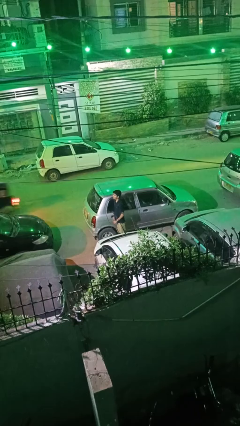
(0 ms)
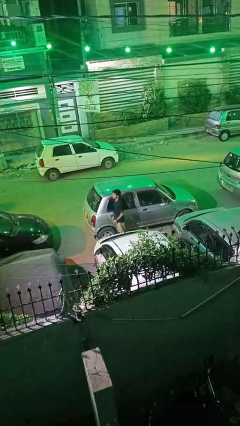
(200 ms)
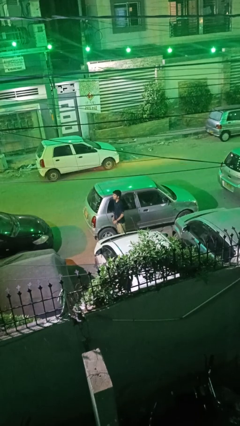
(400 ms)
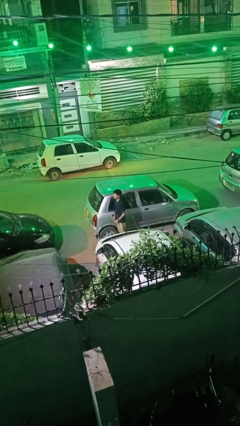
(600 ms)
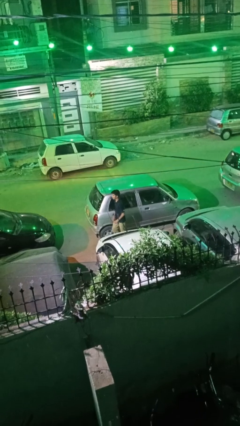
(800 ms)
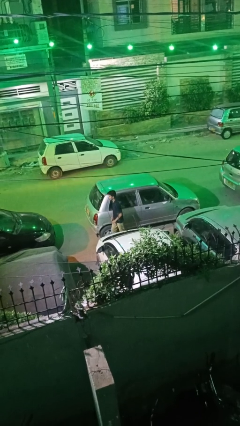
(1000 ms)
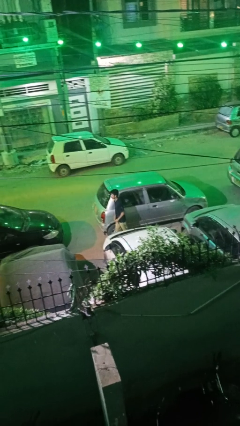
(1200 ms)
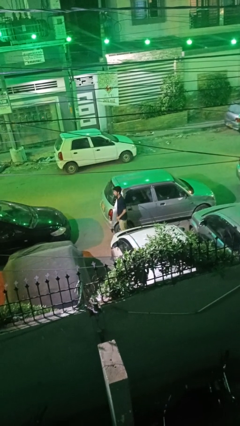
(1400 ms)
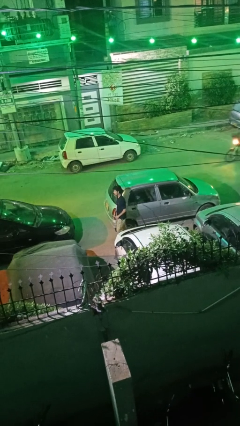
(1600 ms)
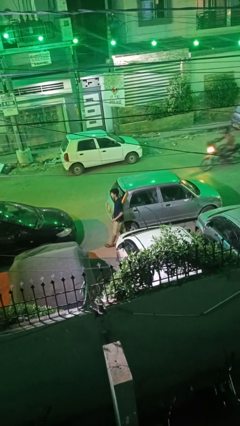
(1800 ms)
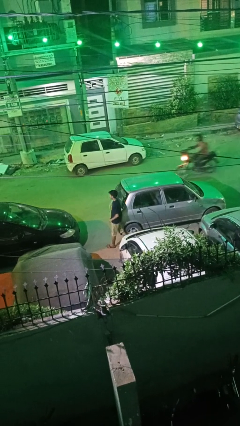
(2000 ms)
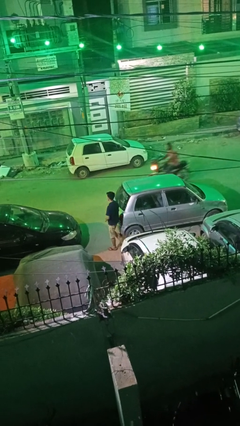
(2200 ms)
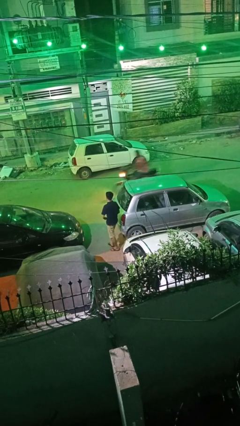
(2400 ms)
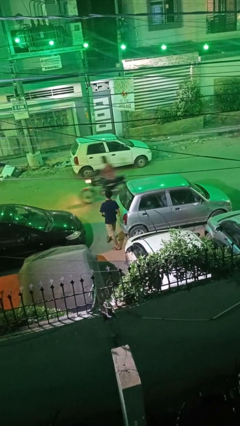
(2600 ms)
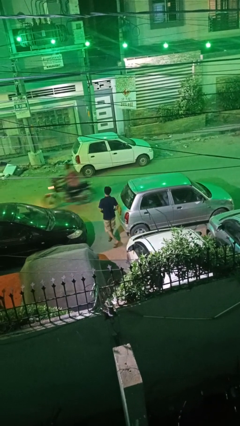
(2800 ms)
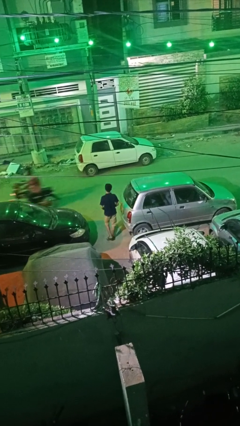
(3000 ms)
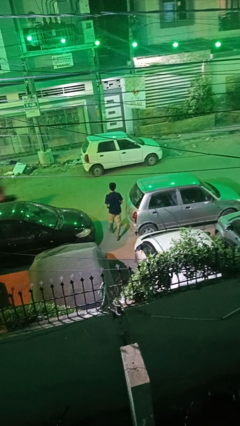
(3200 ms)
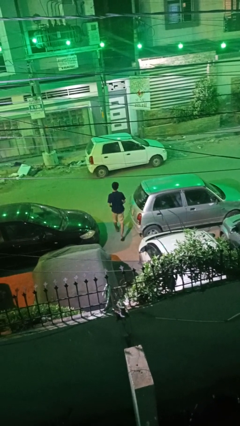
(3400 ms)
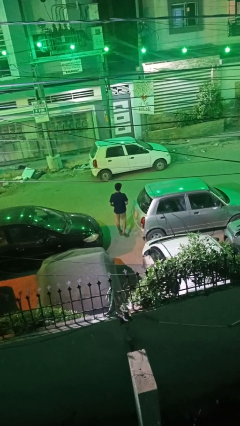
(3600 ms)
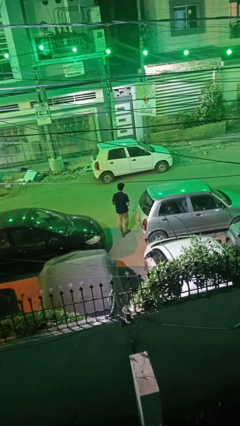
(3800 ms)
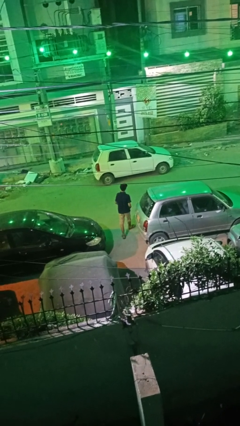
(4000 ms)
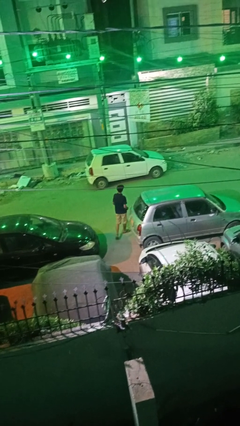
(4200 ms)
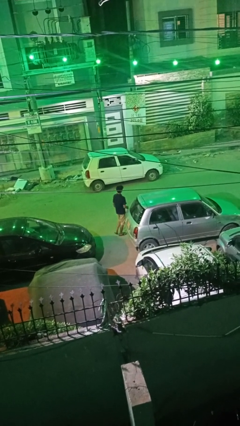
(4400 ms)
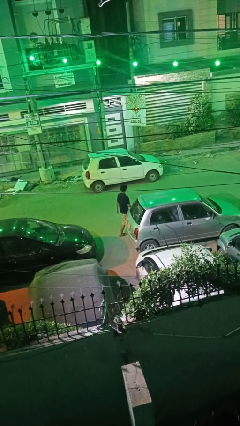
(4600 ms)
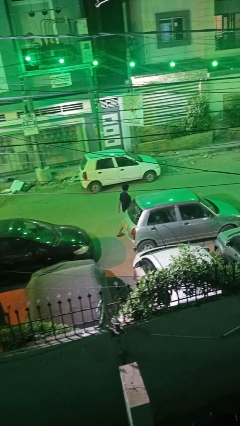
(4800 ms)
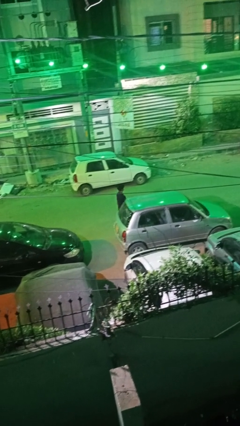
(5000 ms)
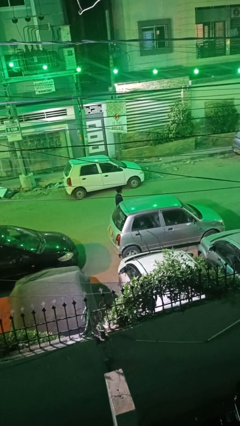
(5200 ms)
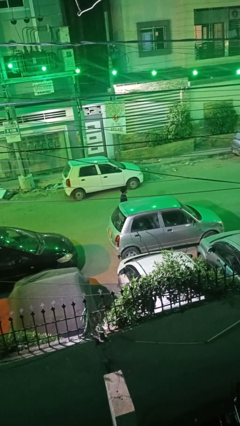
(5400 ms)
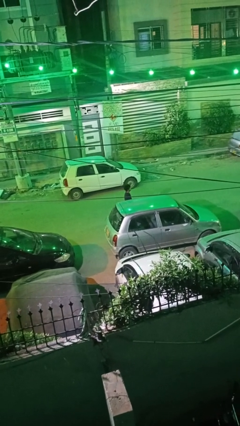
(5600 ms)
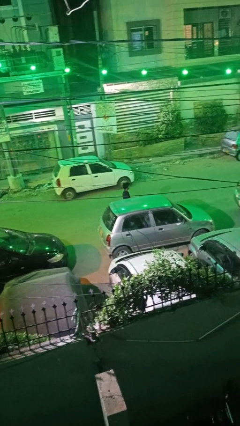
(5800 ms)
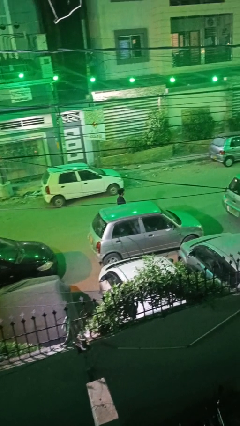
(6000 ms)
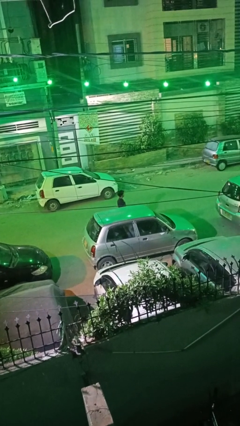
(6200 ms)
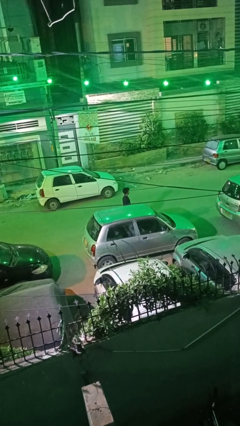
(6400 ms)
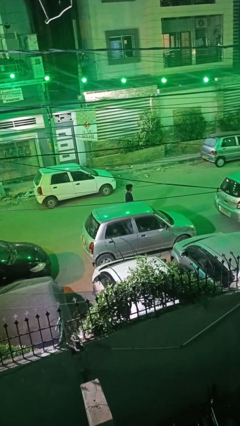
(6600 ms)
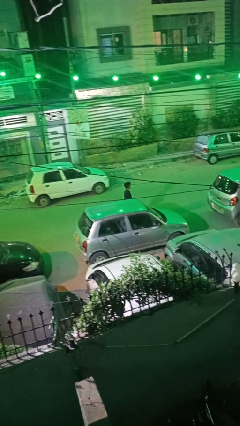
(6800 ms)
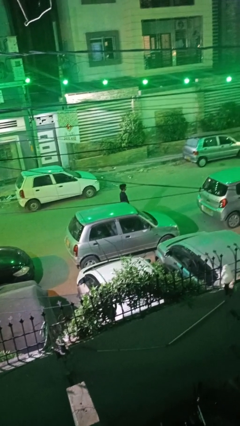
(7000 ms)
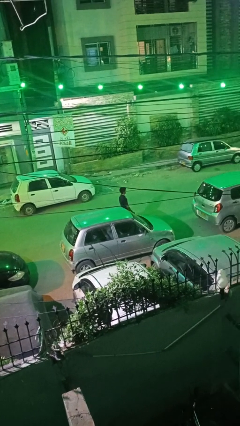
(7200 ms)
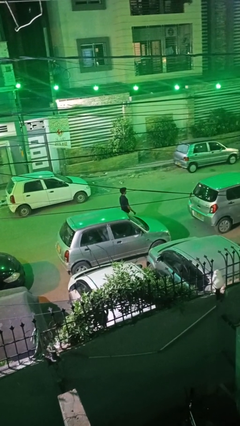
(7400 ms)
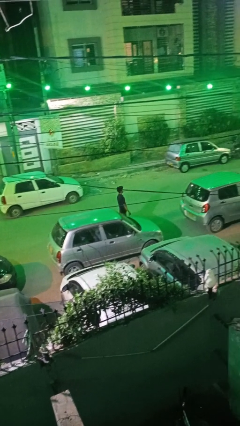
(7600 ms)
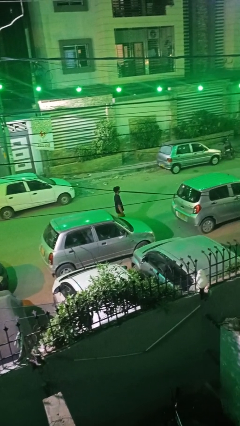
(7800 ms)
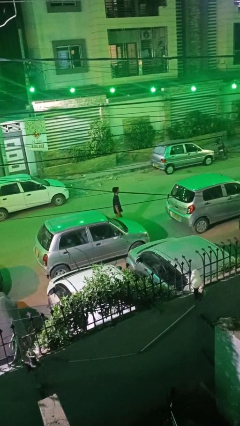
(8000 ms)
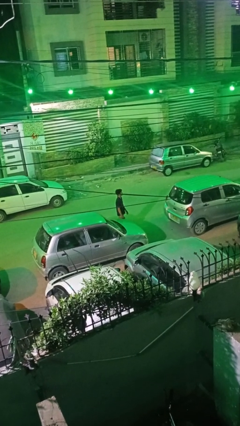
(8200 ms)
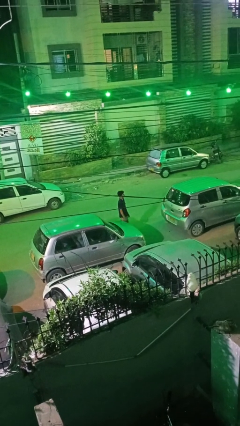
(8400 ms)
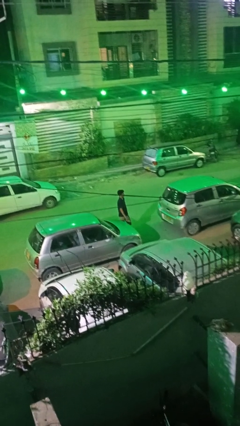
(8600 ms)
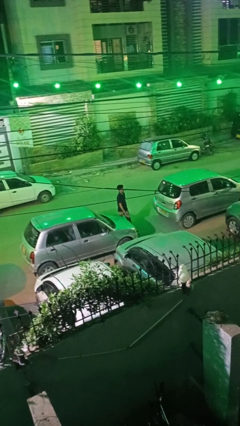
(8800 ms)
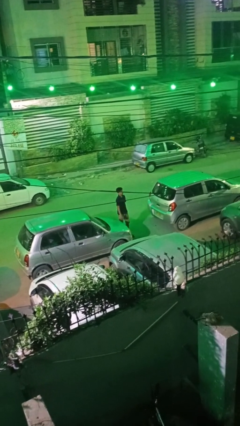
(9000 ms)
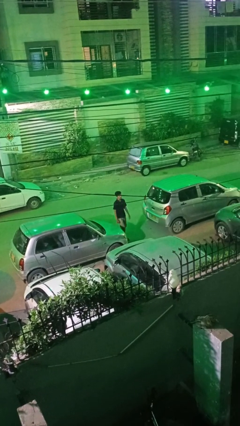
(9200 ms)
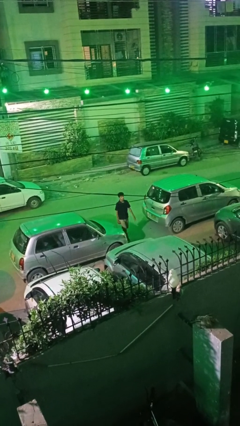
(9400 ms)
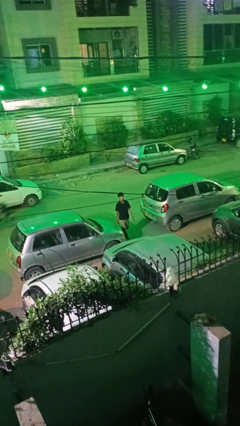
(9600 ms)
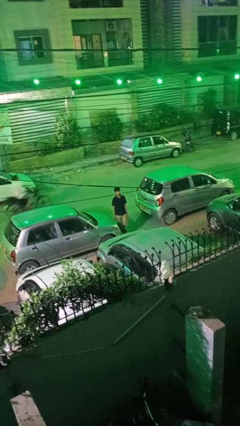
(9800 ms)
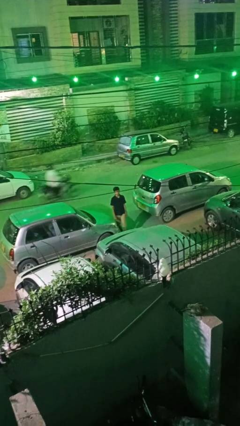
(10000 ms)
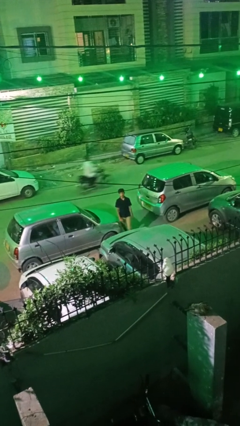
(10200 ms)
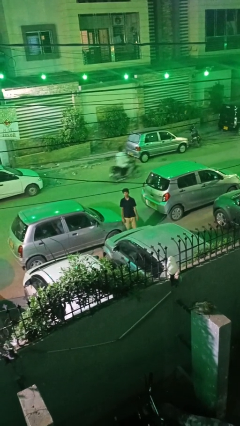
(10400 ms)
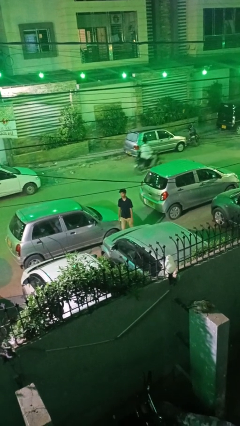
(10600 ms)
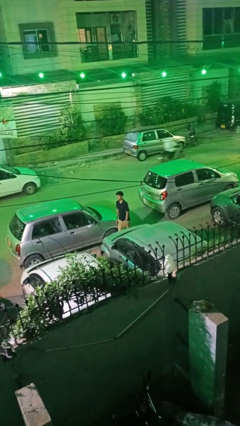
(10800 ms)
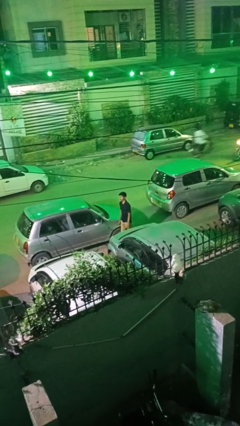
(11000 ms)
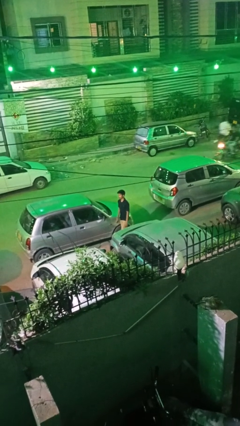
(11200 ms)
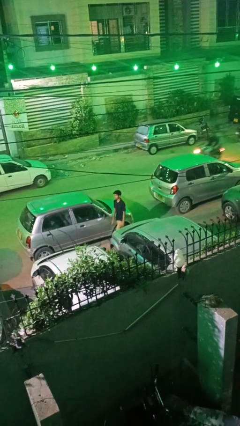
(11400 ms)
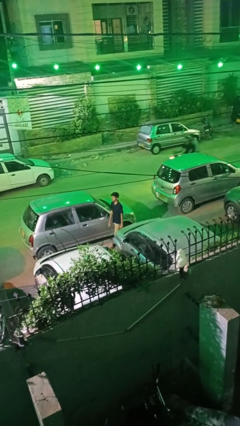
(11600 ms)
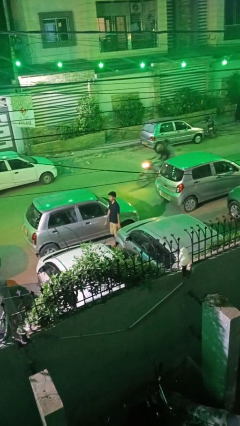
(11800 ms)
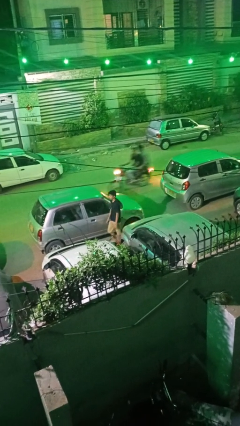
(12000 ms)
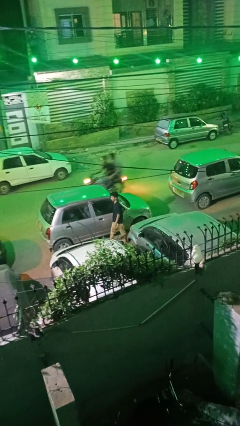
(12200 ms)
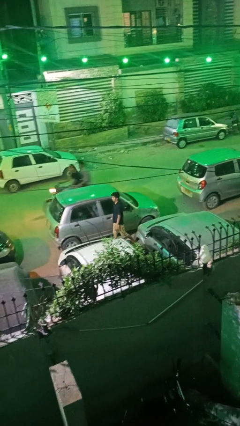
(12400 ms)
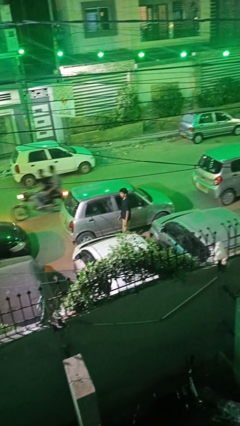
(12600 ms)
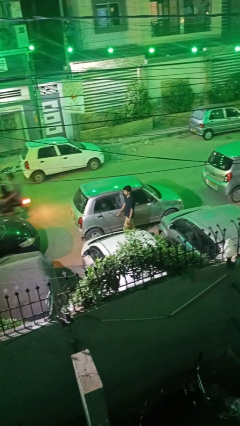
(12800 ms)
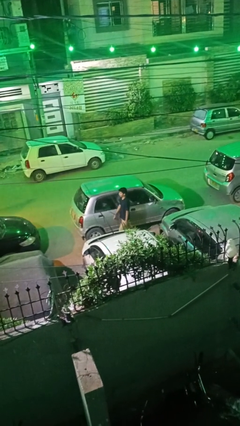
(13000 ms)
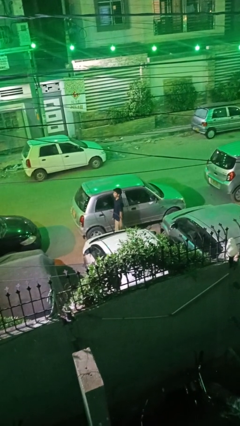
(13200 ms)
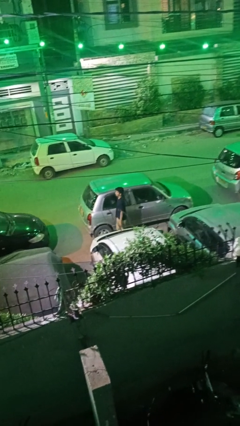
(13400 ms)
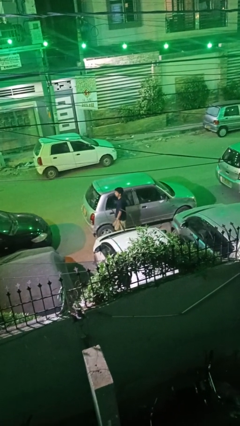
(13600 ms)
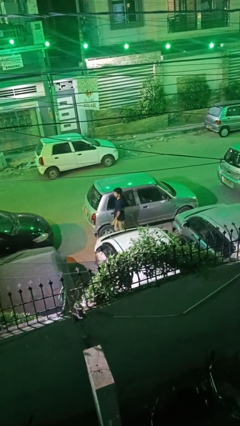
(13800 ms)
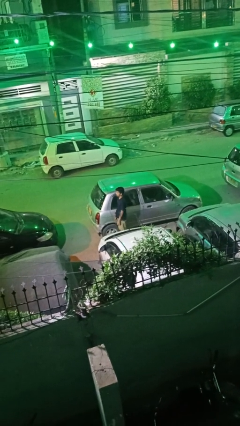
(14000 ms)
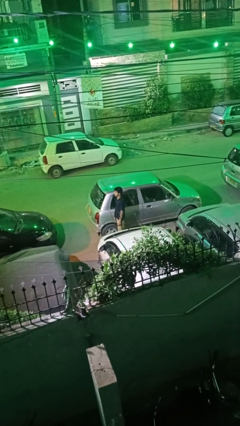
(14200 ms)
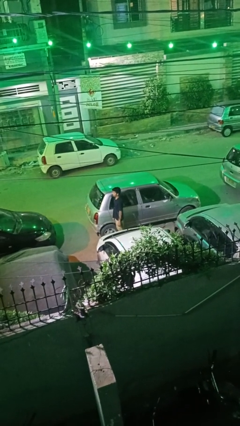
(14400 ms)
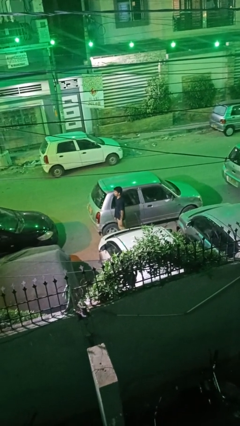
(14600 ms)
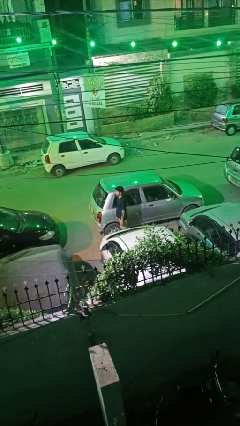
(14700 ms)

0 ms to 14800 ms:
person walks around car

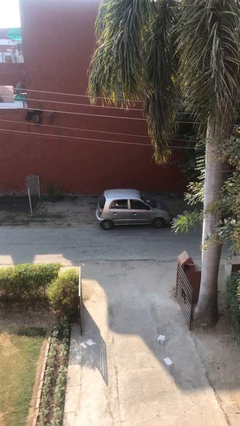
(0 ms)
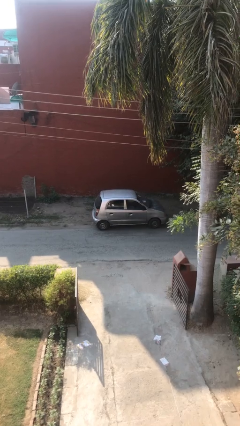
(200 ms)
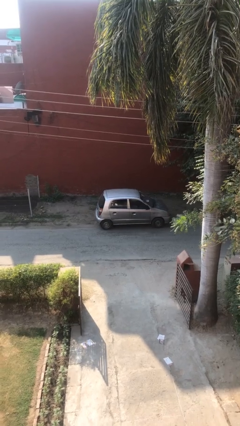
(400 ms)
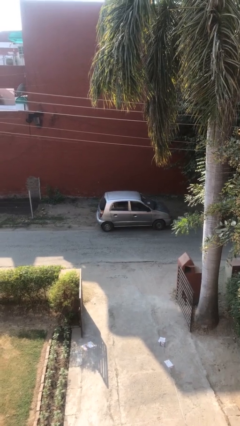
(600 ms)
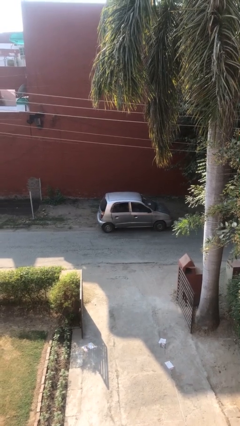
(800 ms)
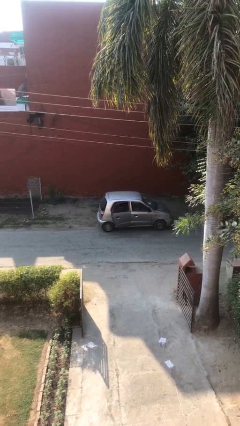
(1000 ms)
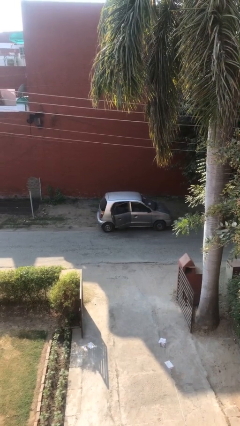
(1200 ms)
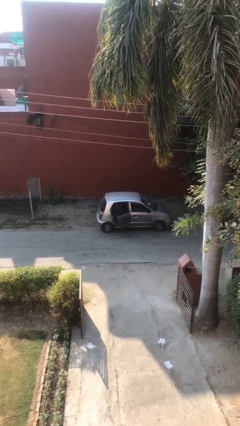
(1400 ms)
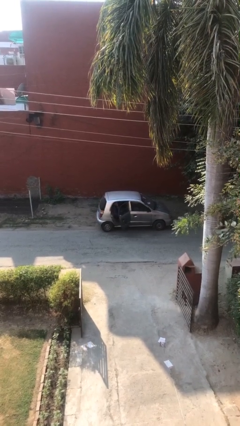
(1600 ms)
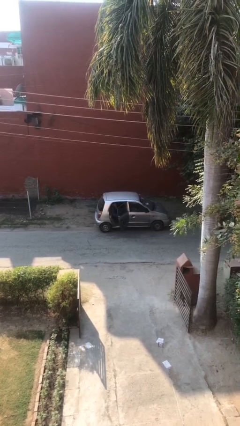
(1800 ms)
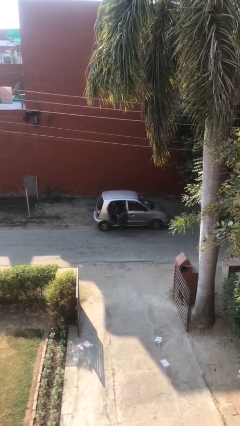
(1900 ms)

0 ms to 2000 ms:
person opens car door

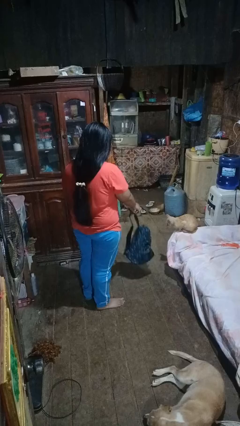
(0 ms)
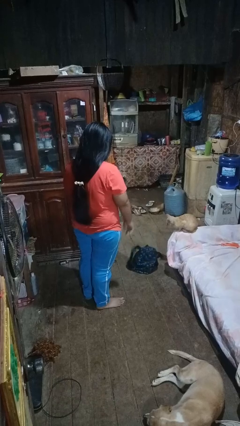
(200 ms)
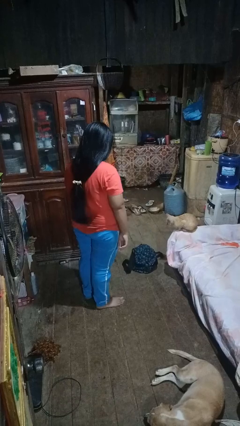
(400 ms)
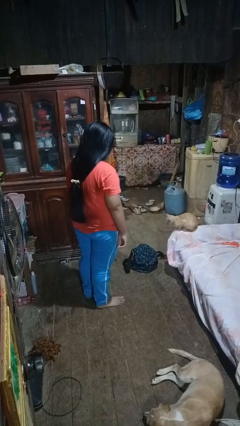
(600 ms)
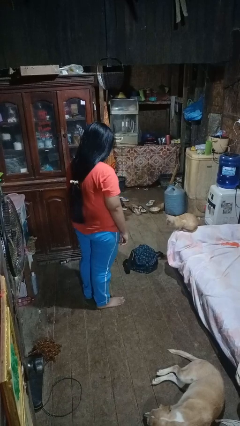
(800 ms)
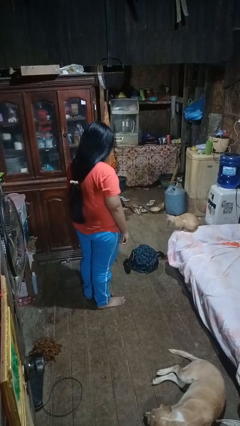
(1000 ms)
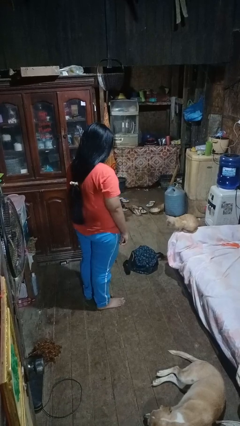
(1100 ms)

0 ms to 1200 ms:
person throws object to ground
